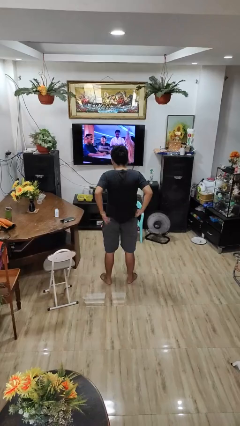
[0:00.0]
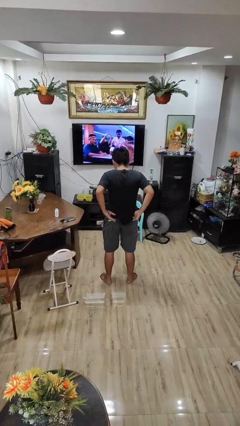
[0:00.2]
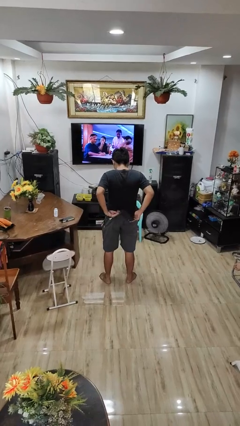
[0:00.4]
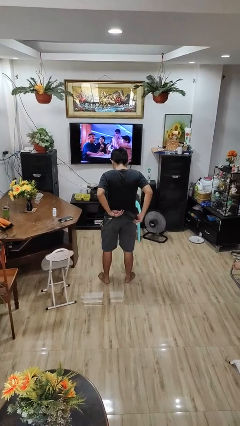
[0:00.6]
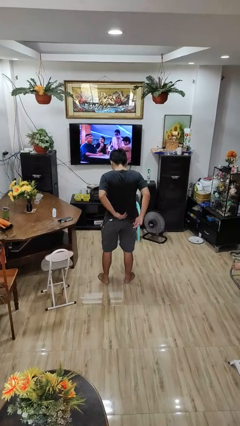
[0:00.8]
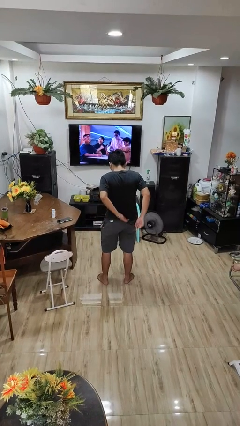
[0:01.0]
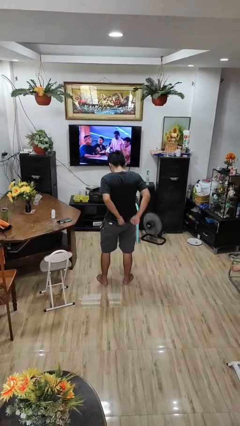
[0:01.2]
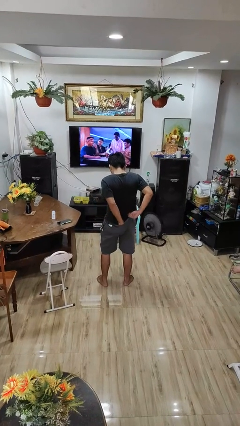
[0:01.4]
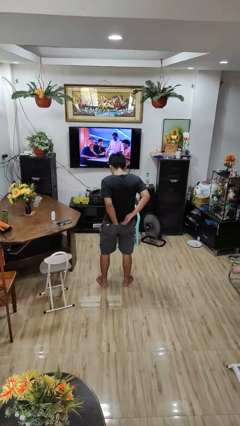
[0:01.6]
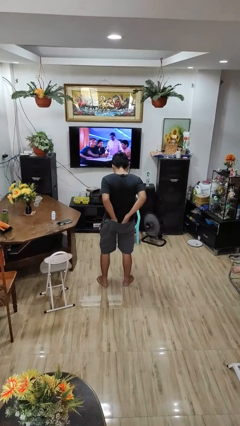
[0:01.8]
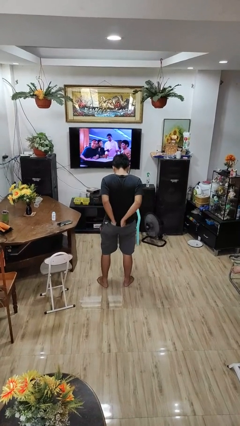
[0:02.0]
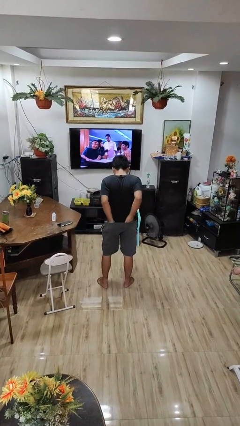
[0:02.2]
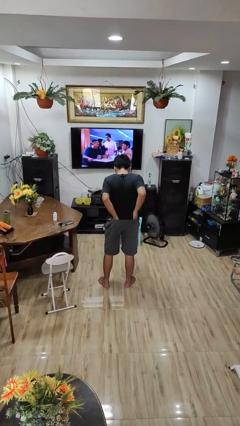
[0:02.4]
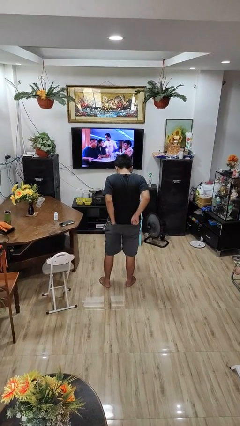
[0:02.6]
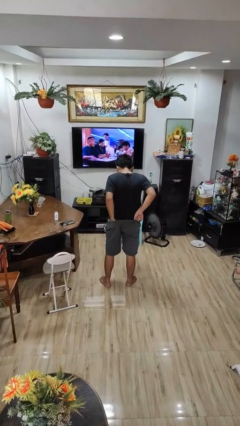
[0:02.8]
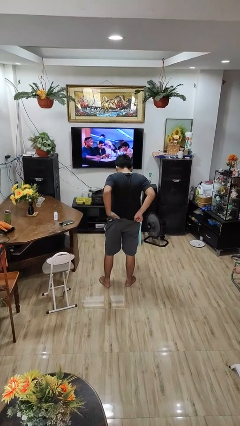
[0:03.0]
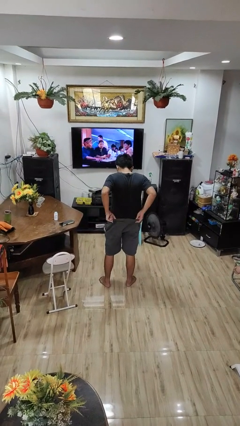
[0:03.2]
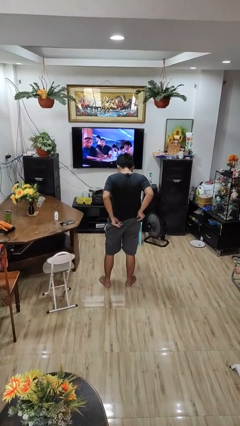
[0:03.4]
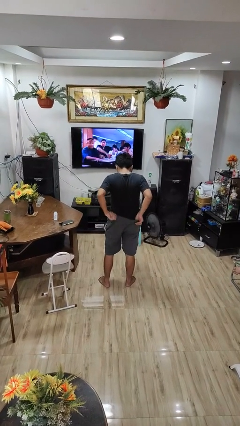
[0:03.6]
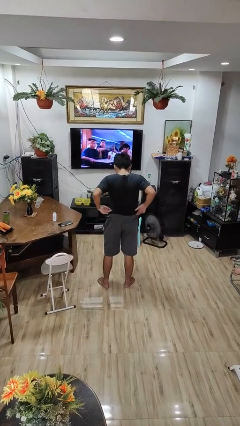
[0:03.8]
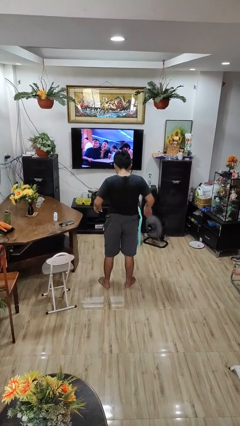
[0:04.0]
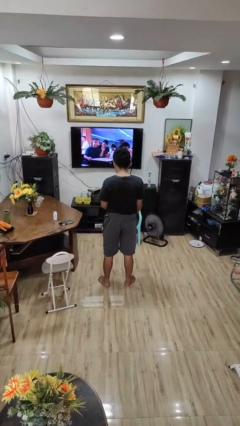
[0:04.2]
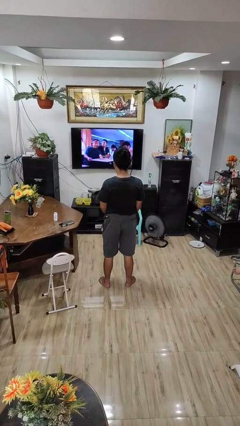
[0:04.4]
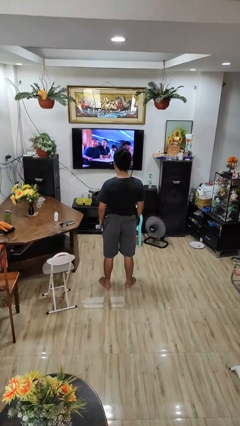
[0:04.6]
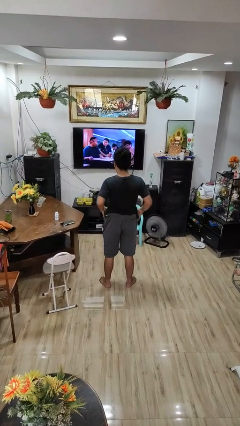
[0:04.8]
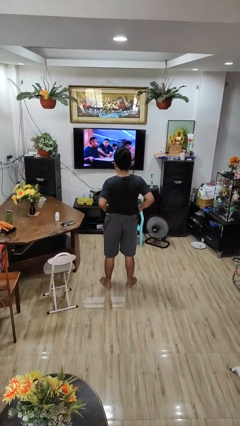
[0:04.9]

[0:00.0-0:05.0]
person tucks in shirt

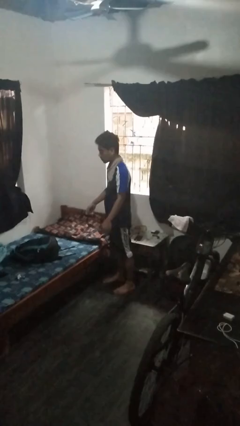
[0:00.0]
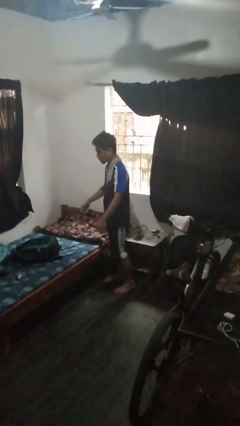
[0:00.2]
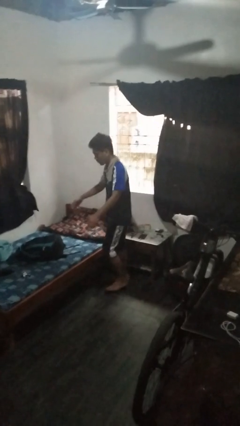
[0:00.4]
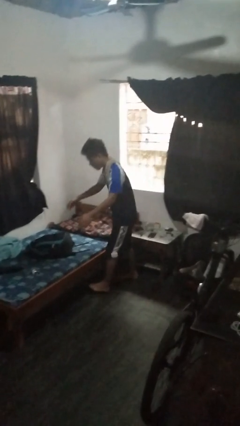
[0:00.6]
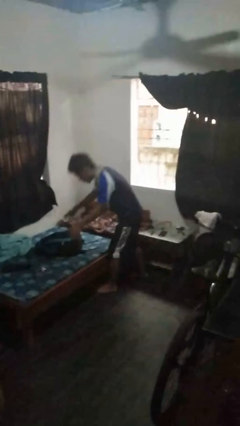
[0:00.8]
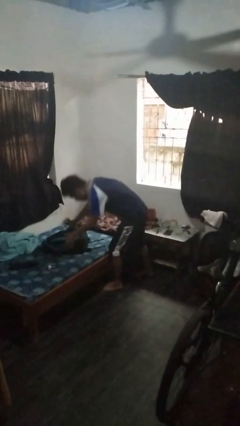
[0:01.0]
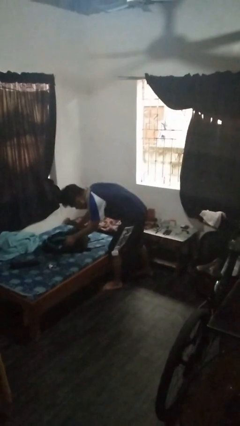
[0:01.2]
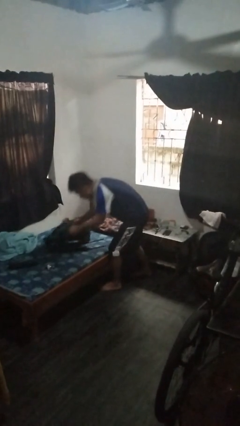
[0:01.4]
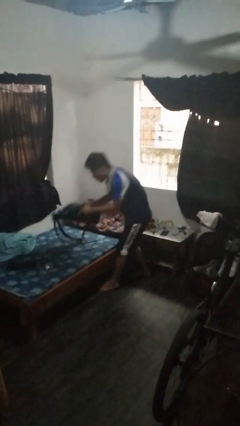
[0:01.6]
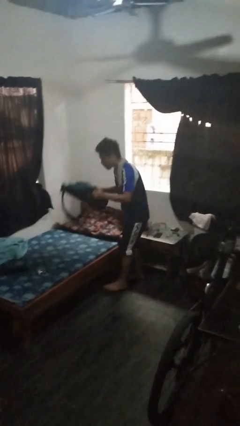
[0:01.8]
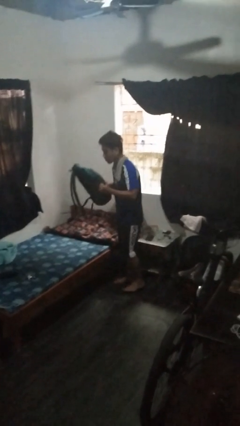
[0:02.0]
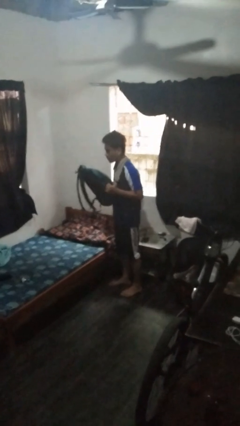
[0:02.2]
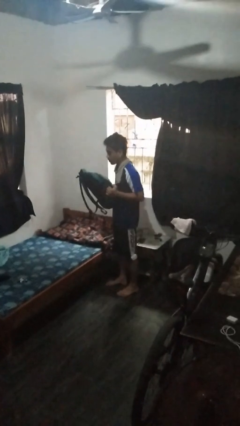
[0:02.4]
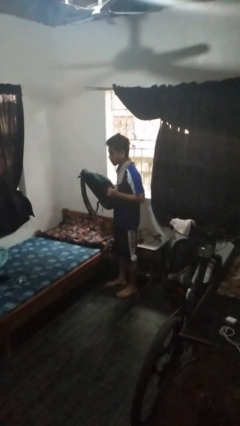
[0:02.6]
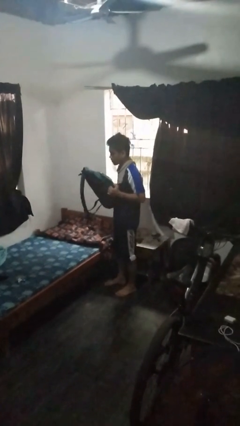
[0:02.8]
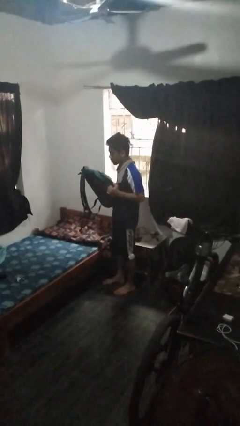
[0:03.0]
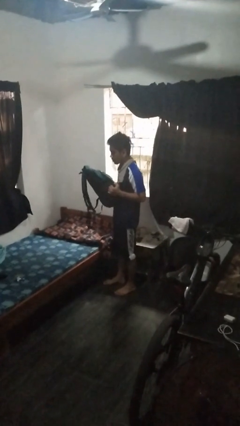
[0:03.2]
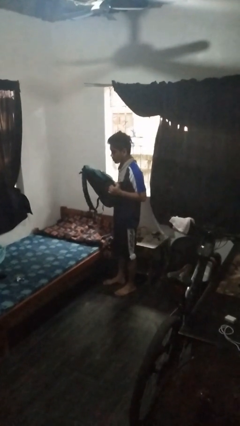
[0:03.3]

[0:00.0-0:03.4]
person picks up object from bed

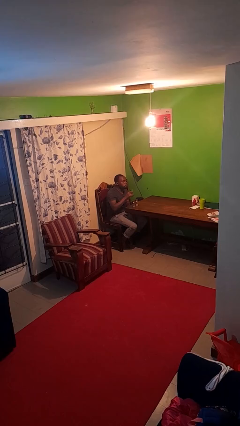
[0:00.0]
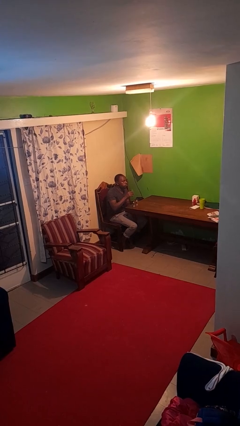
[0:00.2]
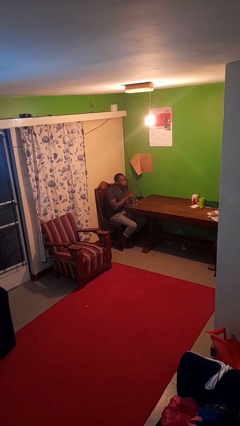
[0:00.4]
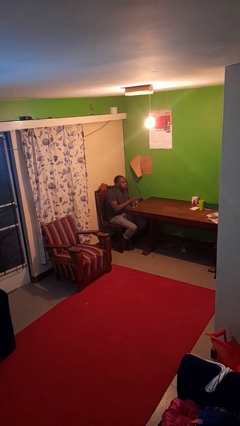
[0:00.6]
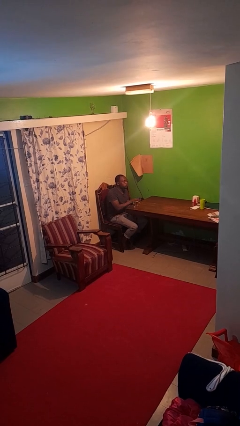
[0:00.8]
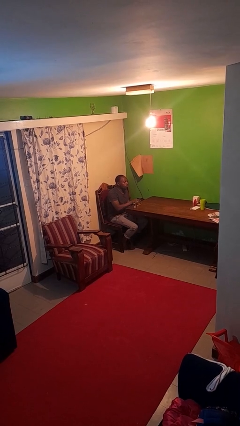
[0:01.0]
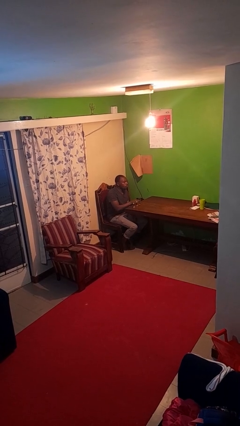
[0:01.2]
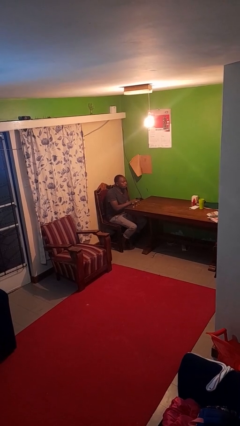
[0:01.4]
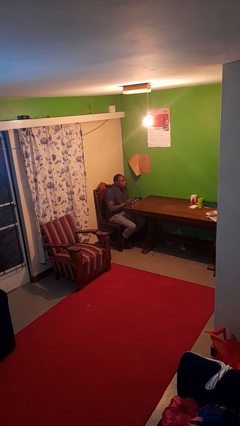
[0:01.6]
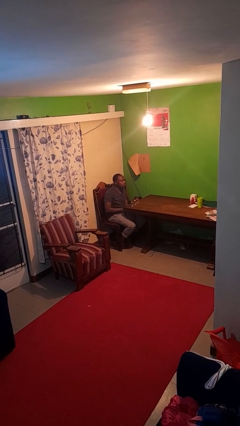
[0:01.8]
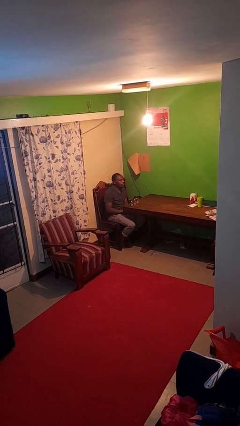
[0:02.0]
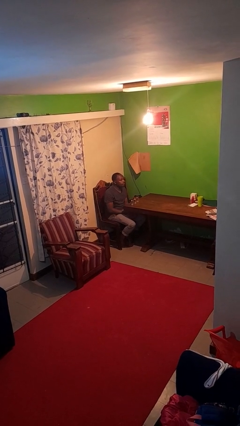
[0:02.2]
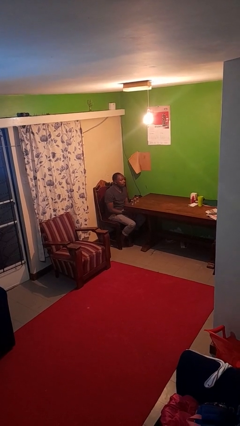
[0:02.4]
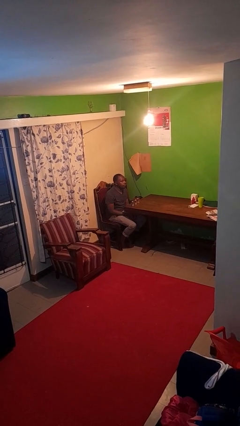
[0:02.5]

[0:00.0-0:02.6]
person puts down object on table

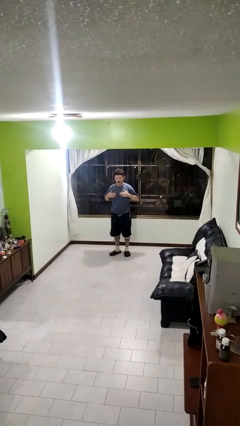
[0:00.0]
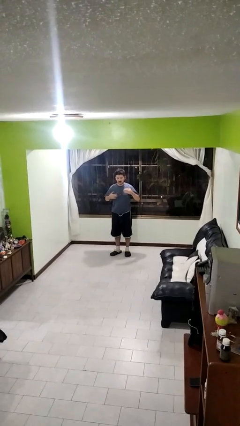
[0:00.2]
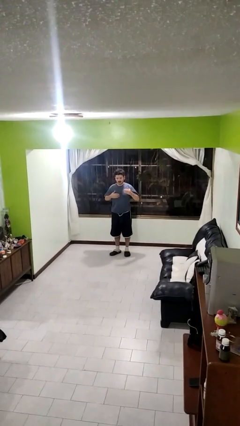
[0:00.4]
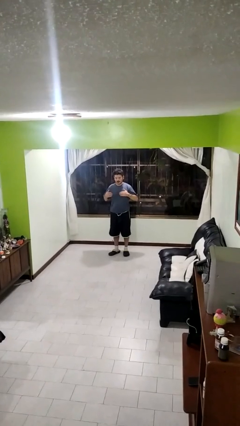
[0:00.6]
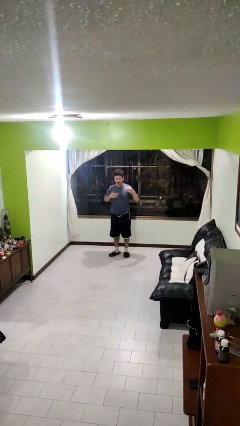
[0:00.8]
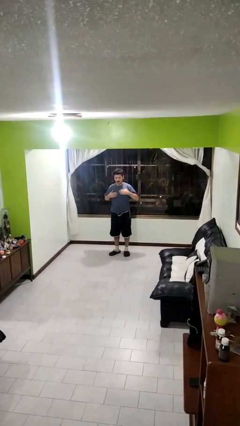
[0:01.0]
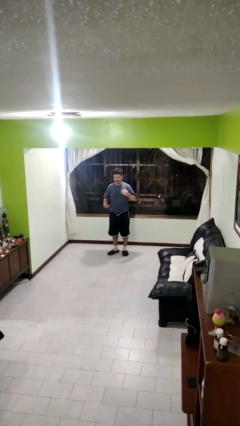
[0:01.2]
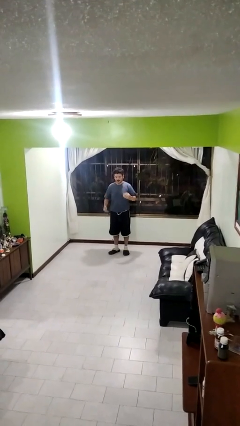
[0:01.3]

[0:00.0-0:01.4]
person drums on chest

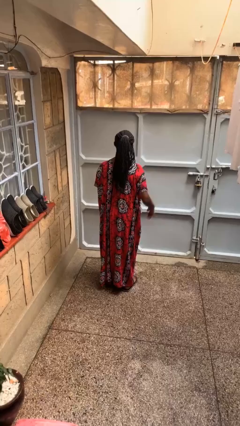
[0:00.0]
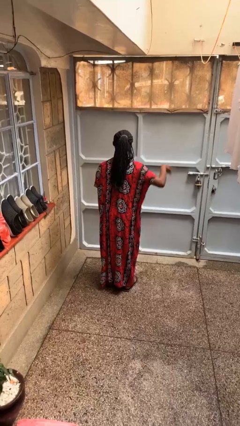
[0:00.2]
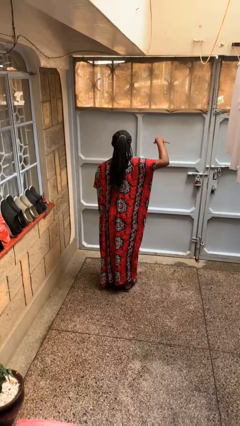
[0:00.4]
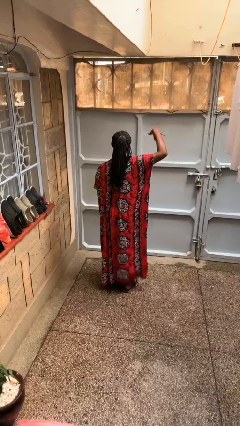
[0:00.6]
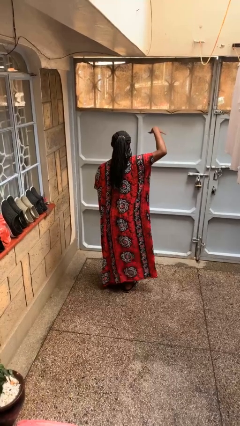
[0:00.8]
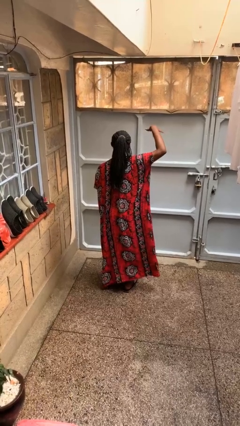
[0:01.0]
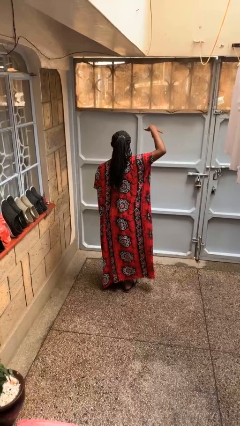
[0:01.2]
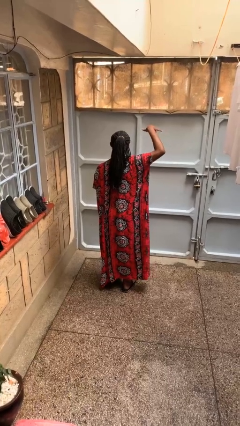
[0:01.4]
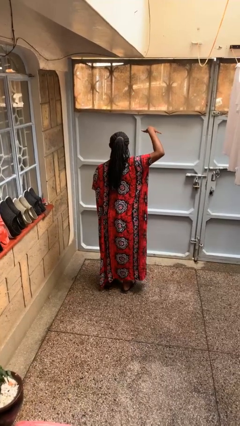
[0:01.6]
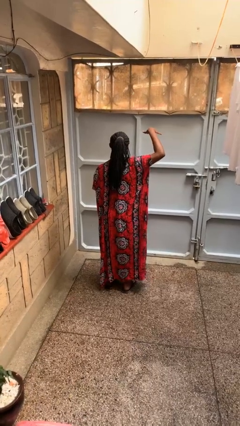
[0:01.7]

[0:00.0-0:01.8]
person gestures hang loose

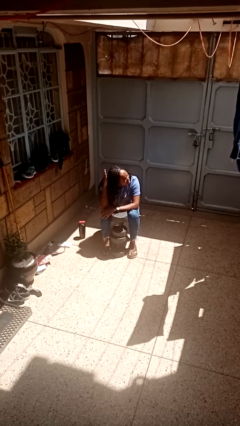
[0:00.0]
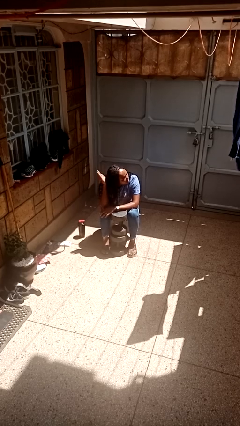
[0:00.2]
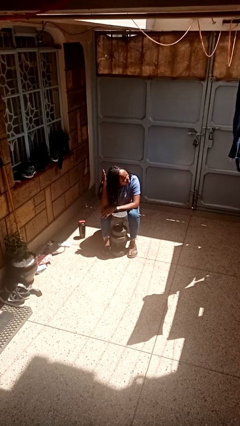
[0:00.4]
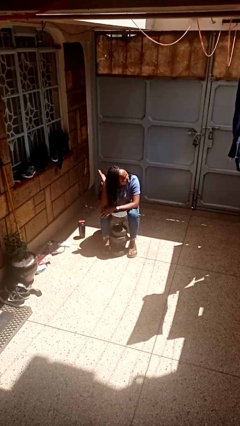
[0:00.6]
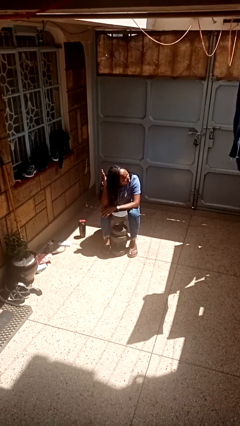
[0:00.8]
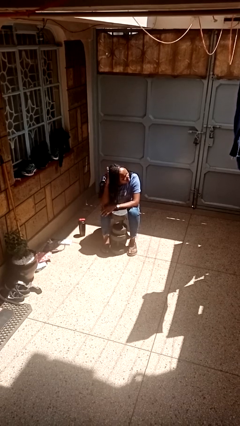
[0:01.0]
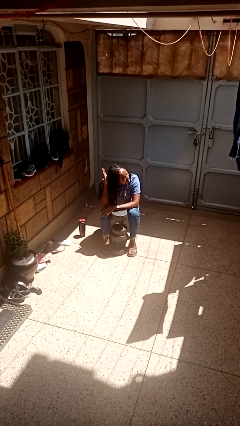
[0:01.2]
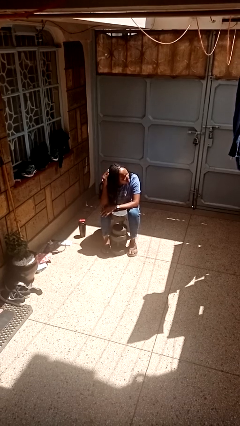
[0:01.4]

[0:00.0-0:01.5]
person pats head

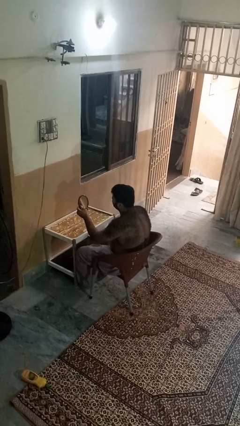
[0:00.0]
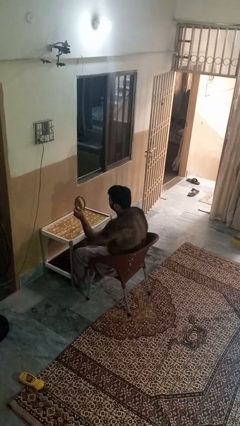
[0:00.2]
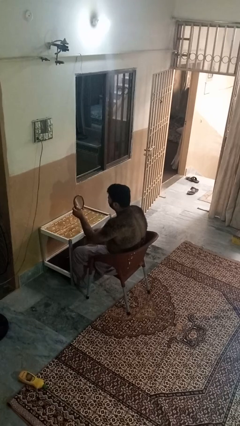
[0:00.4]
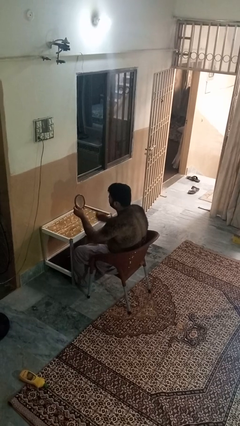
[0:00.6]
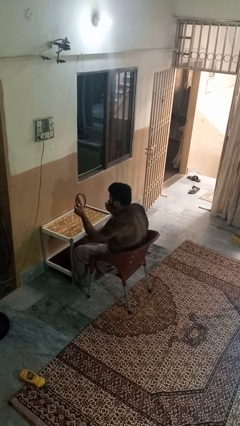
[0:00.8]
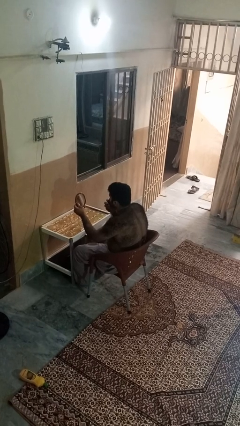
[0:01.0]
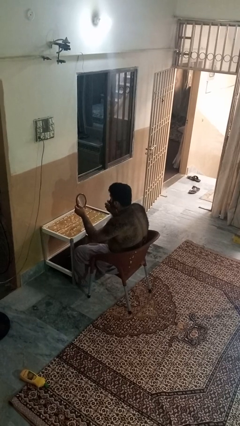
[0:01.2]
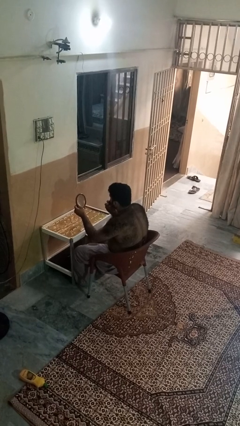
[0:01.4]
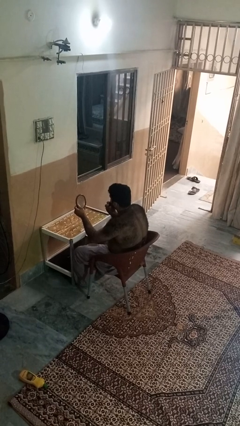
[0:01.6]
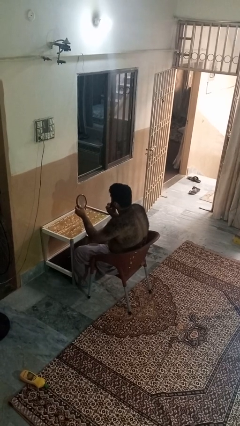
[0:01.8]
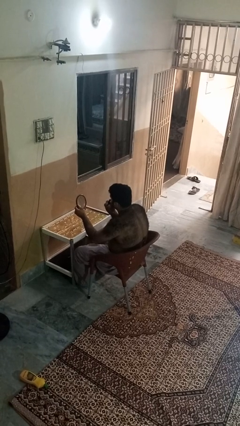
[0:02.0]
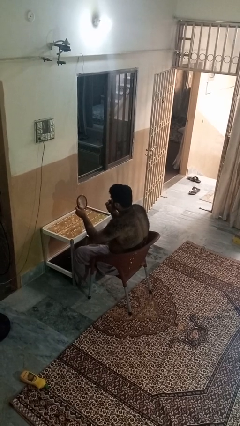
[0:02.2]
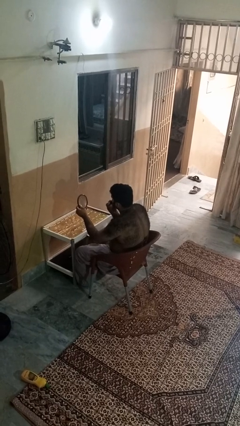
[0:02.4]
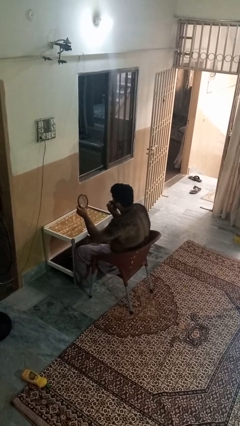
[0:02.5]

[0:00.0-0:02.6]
person applies lip makeup
